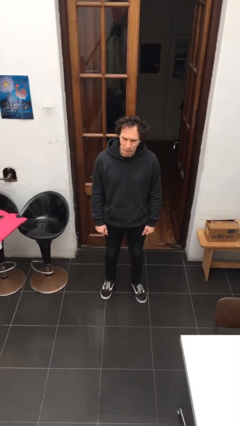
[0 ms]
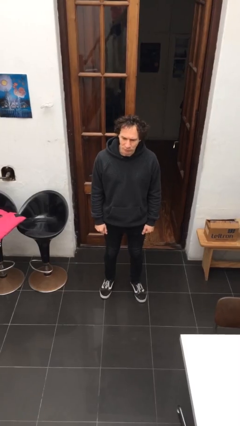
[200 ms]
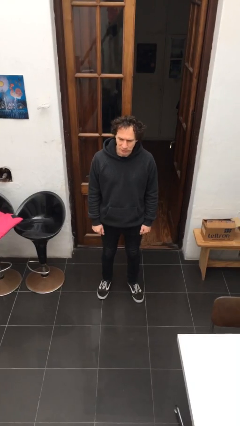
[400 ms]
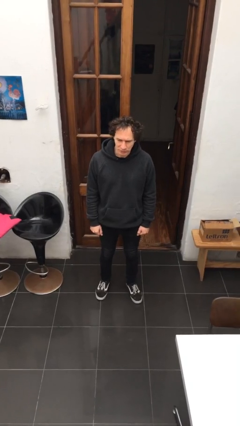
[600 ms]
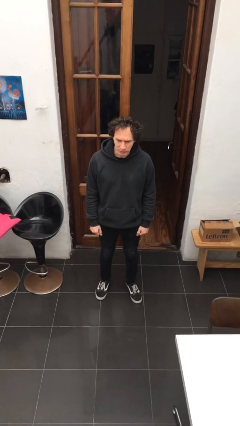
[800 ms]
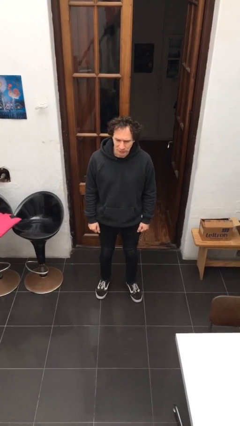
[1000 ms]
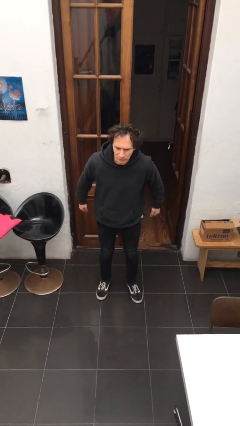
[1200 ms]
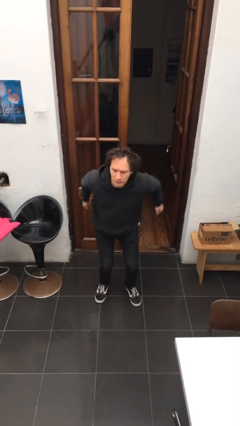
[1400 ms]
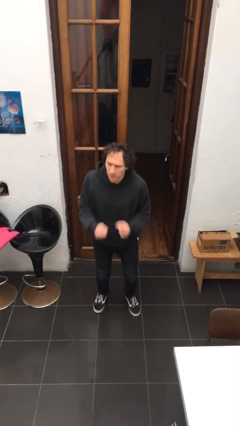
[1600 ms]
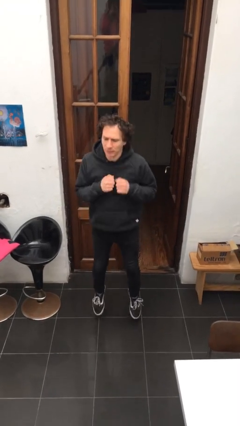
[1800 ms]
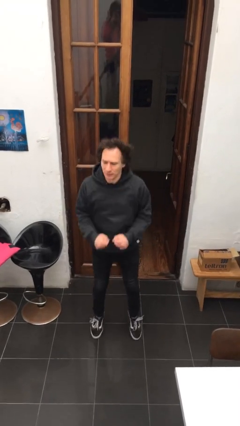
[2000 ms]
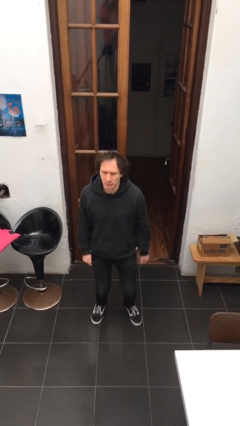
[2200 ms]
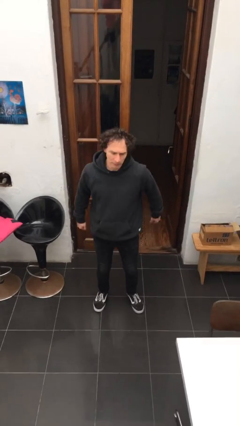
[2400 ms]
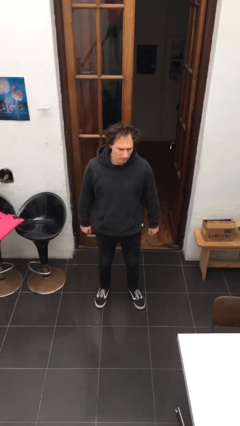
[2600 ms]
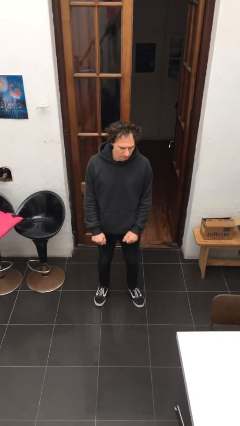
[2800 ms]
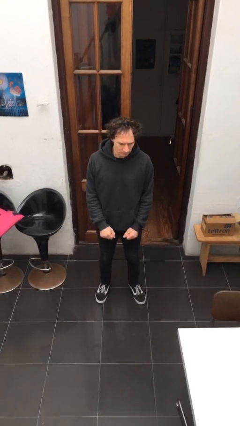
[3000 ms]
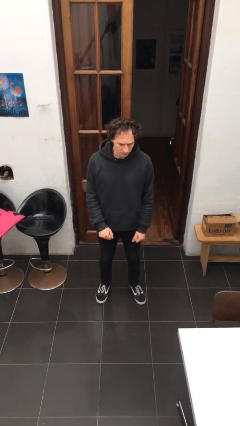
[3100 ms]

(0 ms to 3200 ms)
person jumps

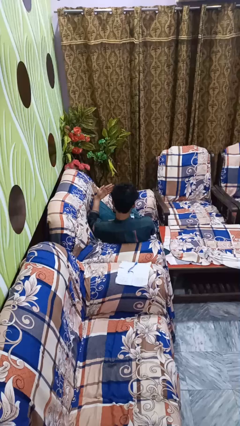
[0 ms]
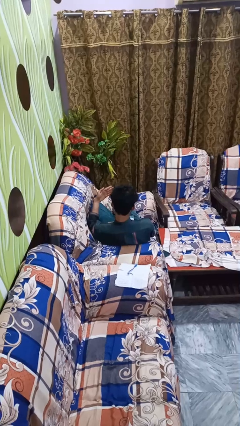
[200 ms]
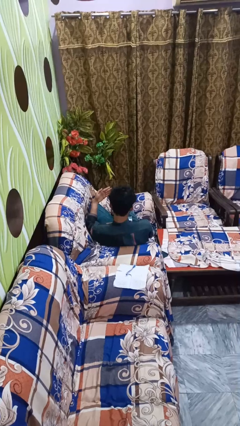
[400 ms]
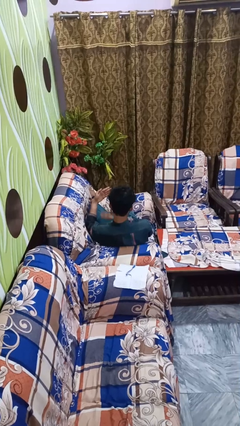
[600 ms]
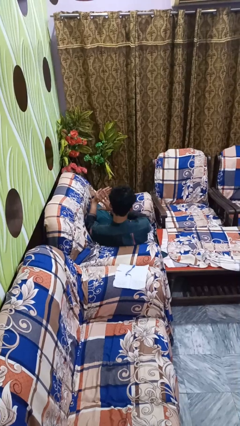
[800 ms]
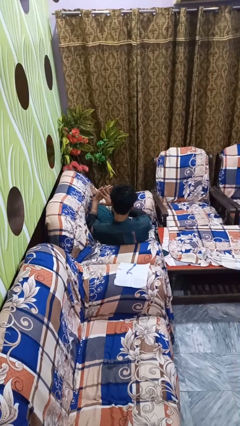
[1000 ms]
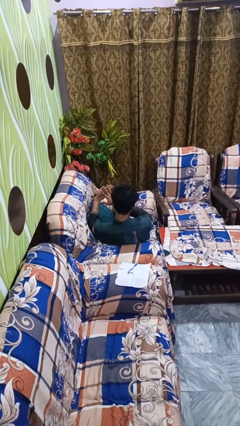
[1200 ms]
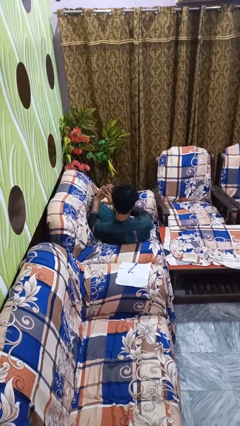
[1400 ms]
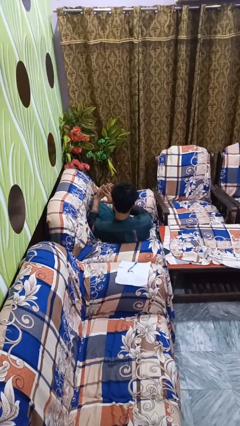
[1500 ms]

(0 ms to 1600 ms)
person gestures number five

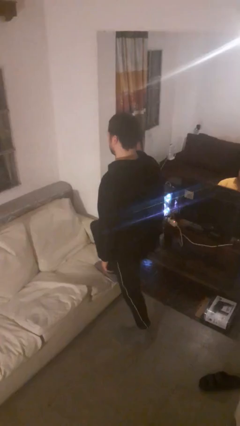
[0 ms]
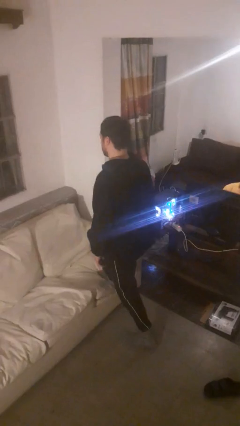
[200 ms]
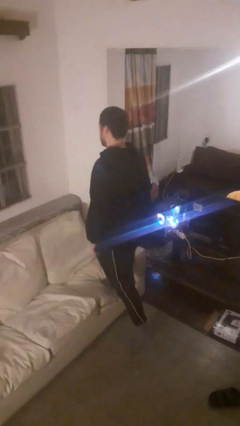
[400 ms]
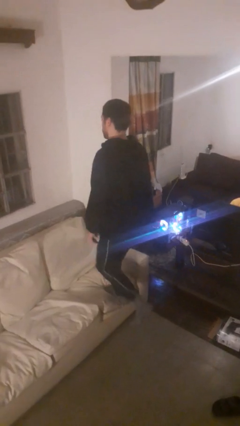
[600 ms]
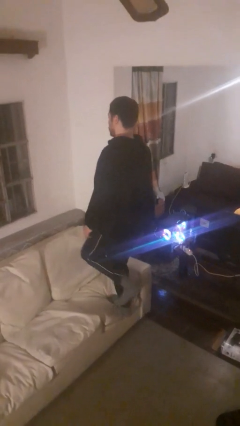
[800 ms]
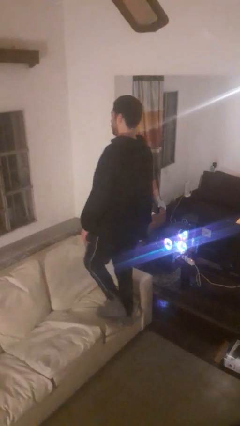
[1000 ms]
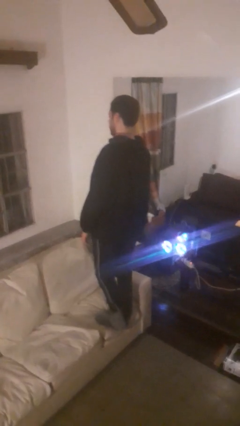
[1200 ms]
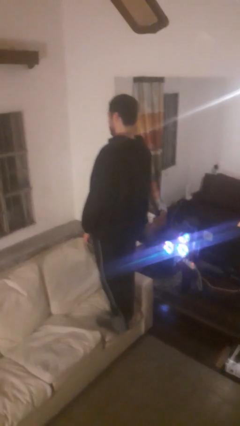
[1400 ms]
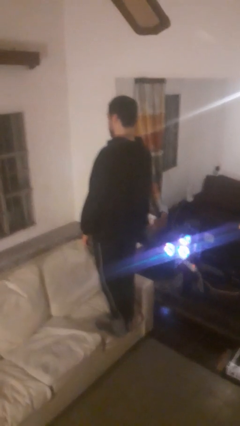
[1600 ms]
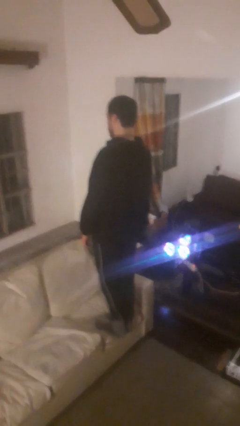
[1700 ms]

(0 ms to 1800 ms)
person climbs on couch

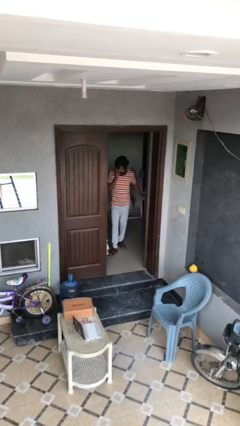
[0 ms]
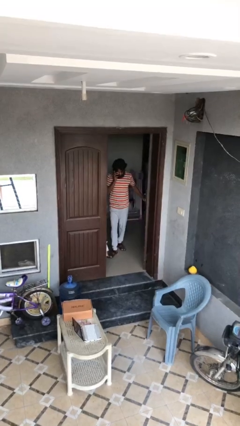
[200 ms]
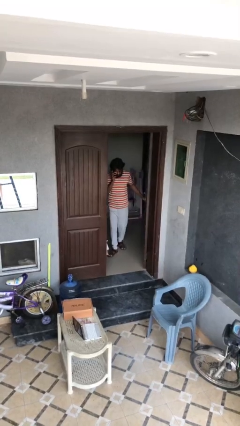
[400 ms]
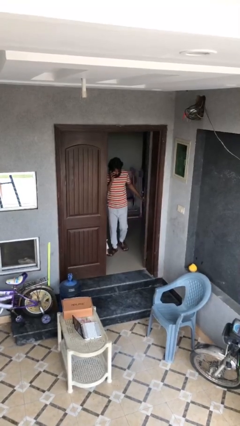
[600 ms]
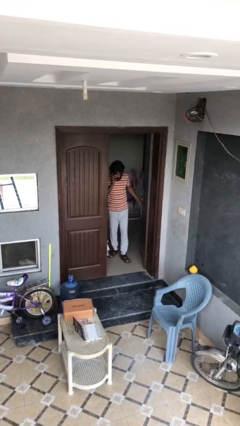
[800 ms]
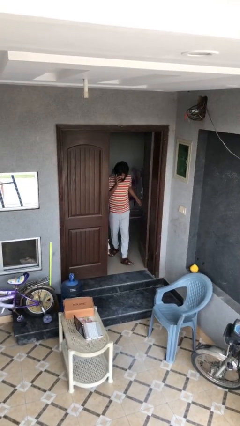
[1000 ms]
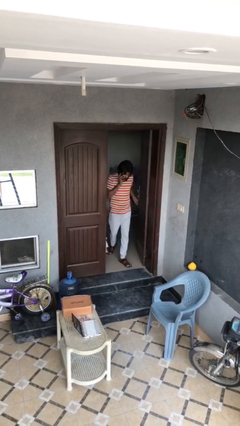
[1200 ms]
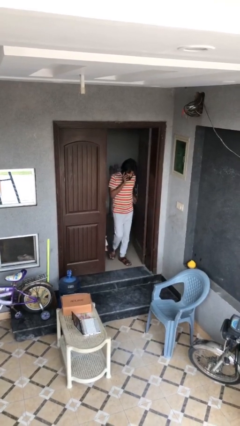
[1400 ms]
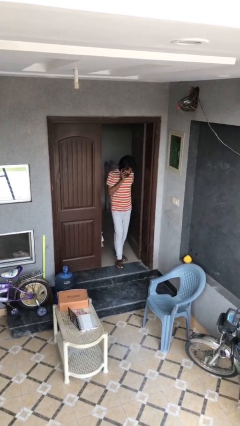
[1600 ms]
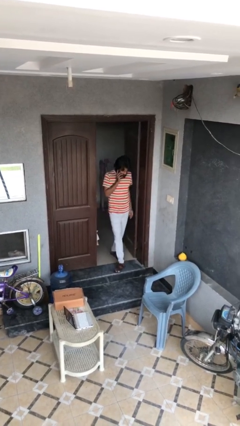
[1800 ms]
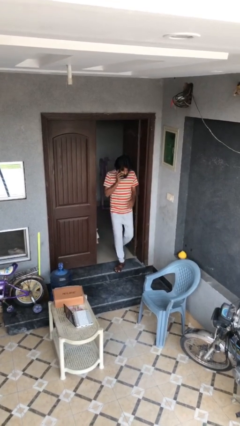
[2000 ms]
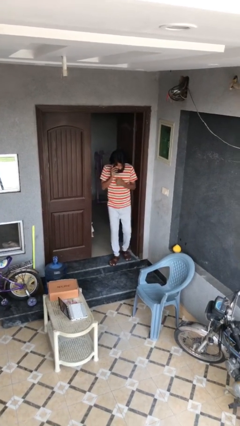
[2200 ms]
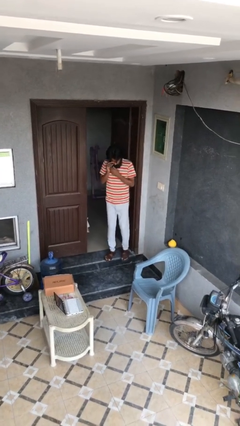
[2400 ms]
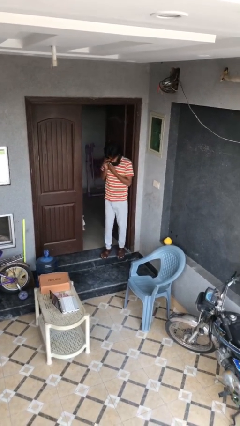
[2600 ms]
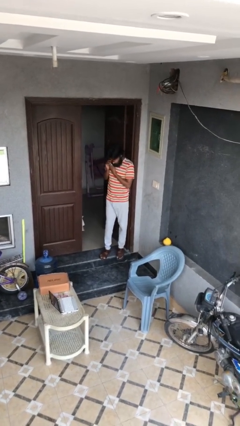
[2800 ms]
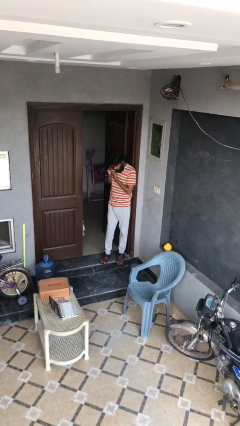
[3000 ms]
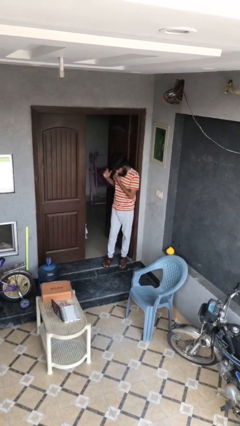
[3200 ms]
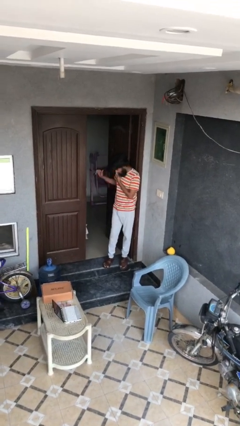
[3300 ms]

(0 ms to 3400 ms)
person enters scene through structure

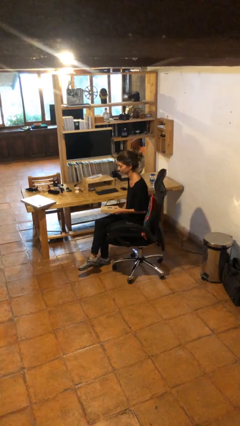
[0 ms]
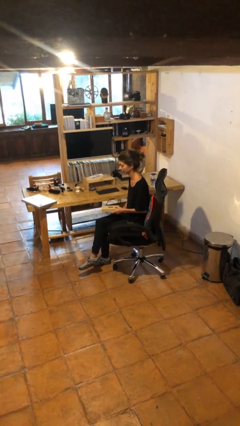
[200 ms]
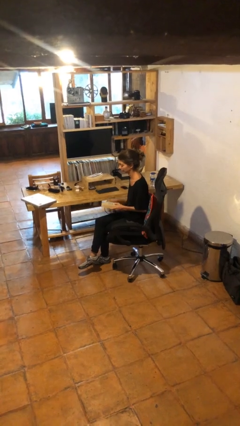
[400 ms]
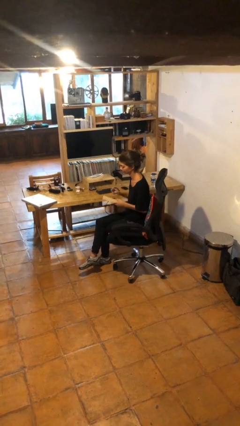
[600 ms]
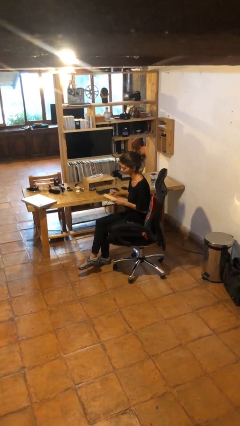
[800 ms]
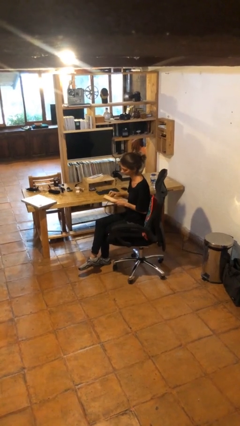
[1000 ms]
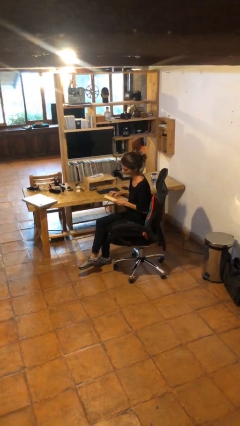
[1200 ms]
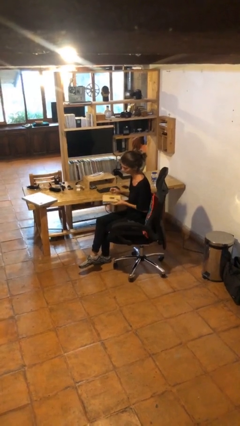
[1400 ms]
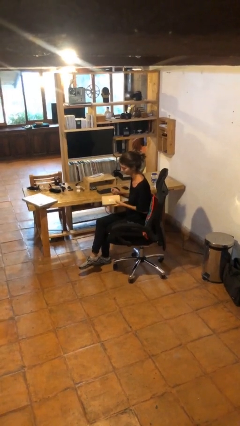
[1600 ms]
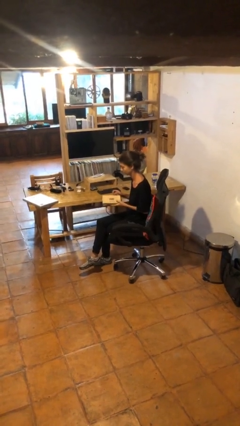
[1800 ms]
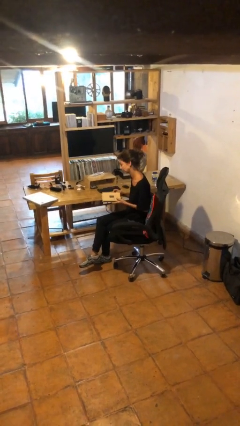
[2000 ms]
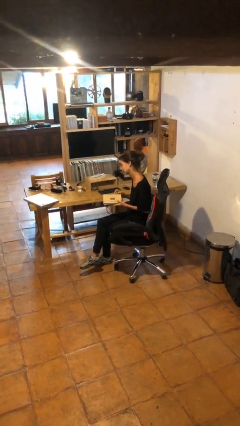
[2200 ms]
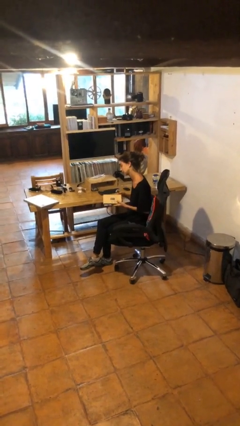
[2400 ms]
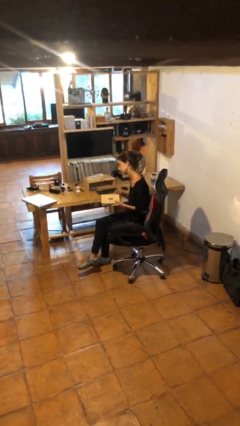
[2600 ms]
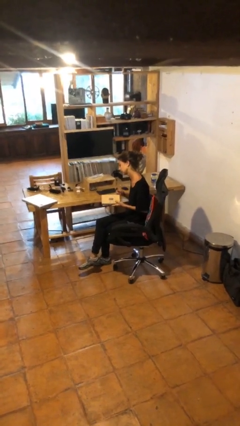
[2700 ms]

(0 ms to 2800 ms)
person taps object with finger

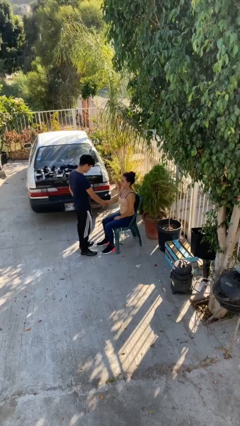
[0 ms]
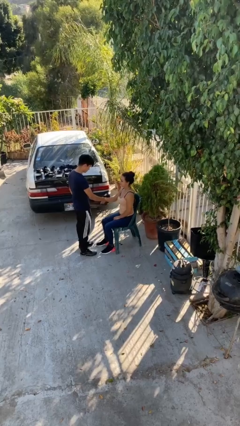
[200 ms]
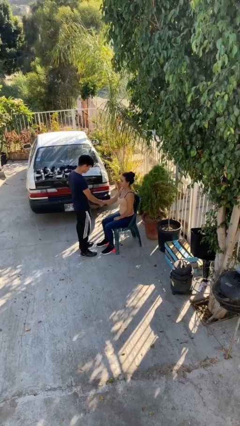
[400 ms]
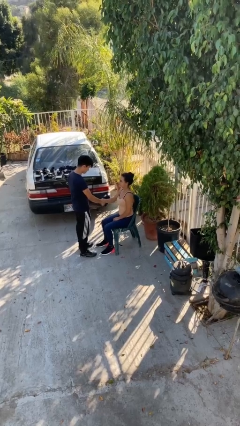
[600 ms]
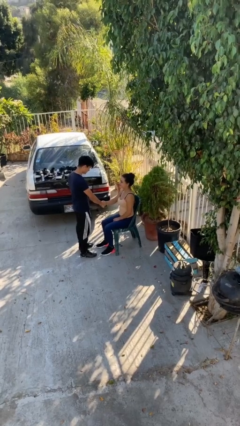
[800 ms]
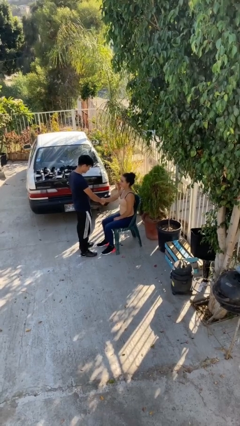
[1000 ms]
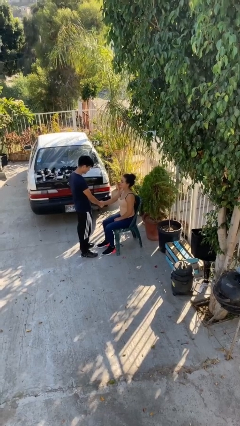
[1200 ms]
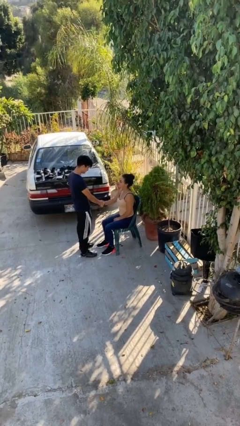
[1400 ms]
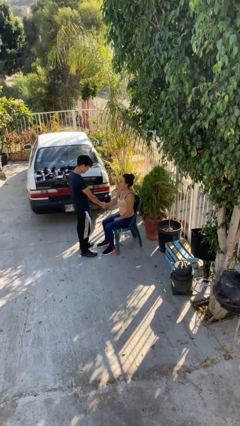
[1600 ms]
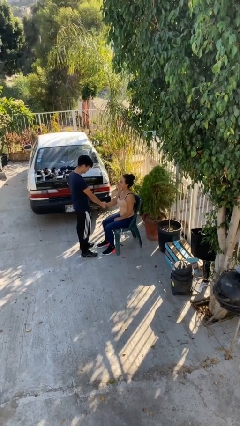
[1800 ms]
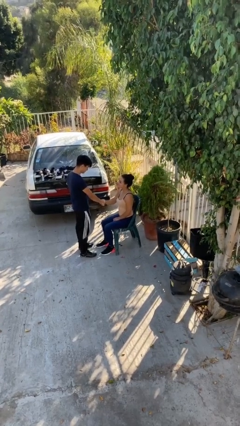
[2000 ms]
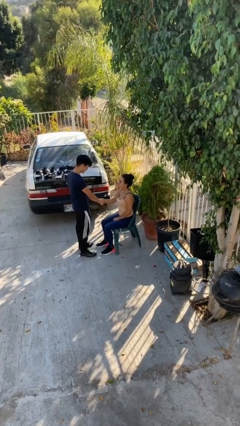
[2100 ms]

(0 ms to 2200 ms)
person shakes hand

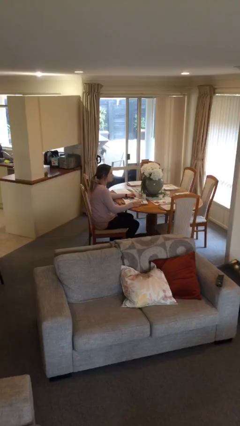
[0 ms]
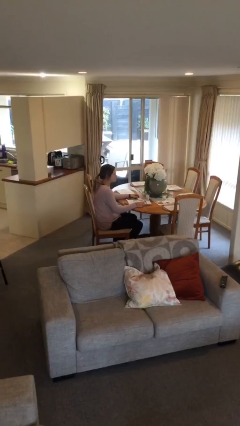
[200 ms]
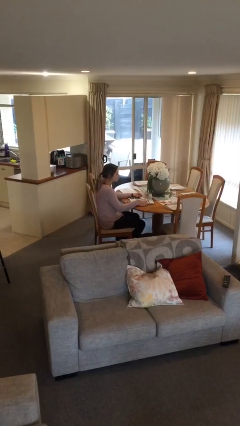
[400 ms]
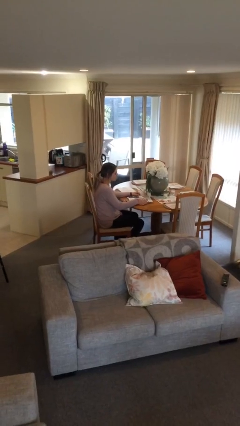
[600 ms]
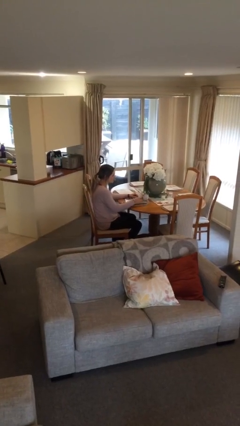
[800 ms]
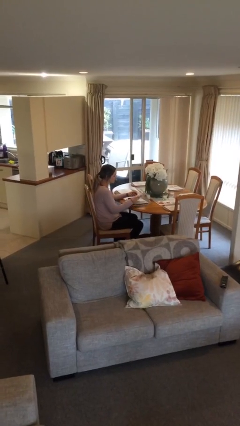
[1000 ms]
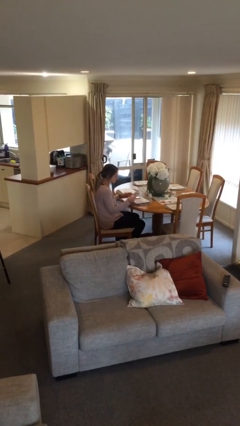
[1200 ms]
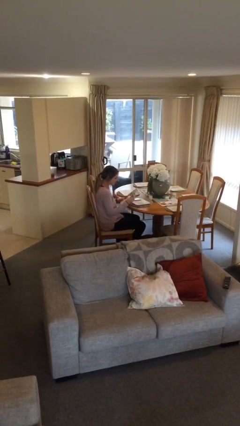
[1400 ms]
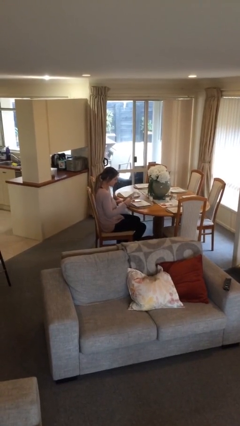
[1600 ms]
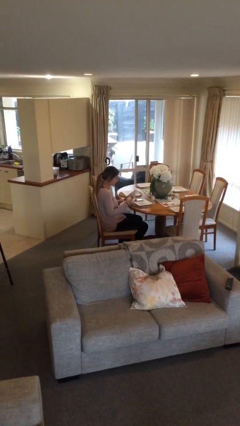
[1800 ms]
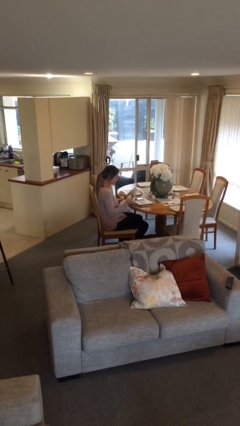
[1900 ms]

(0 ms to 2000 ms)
person picks up object from table

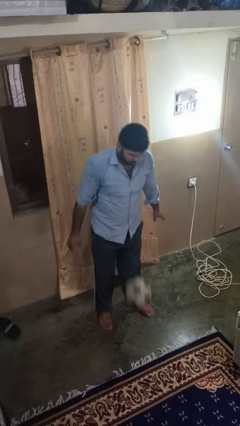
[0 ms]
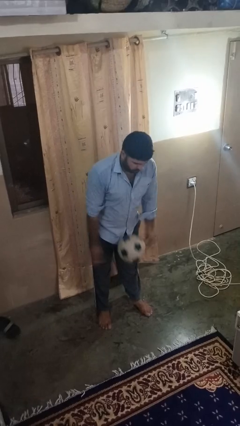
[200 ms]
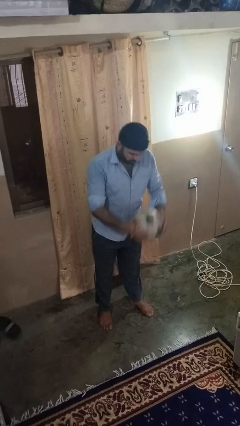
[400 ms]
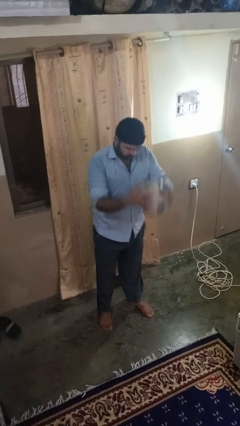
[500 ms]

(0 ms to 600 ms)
person bounces ball on floor
